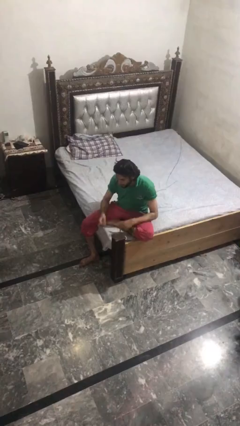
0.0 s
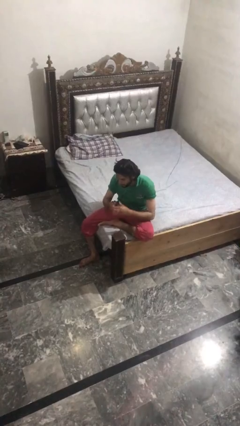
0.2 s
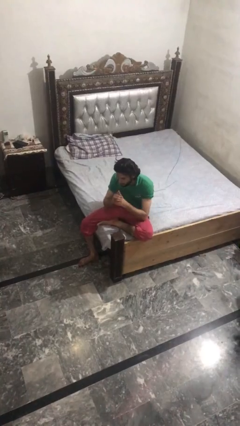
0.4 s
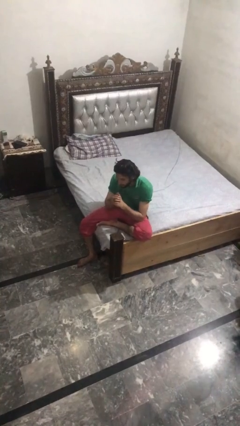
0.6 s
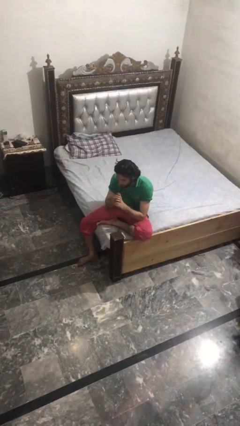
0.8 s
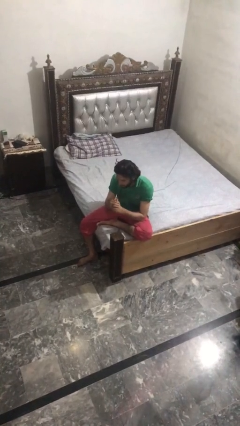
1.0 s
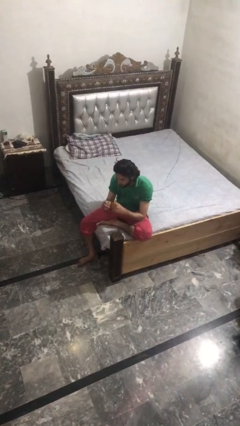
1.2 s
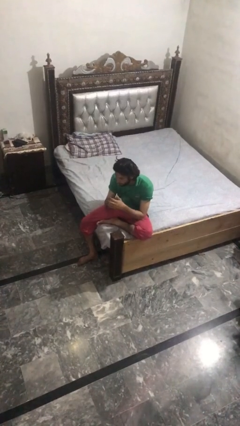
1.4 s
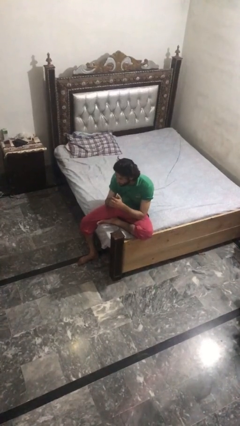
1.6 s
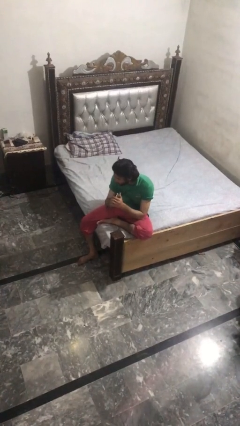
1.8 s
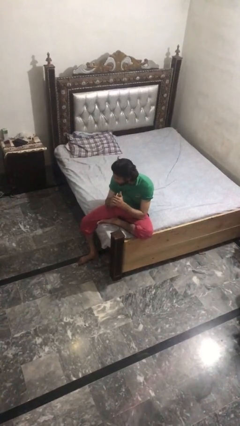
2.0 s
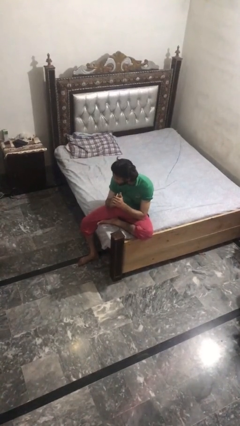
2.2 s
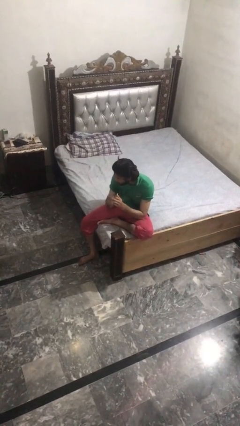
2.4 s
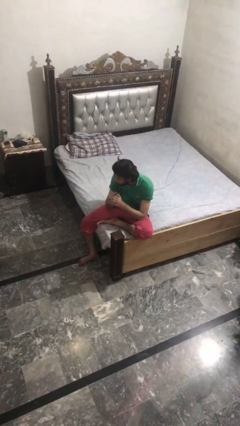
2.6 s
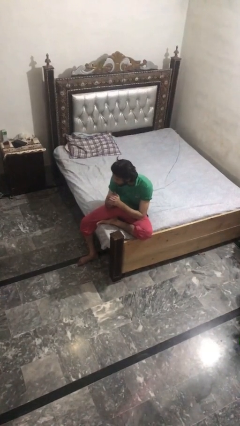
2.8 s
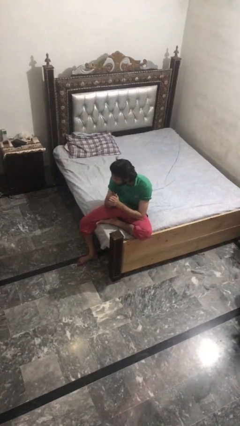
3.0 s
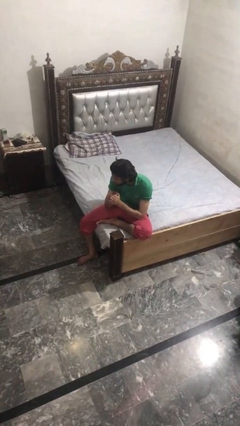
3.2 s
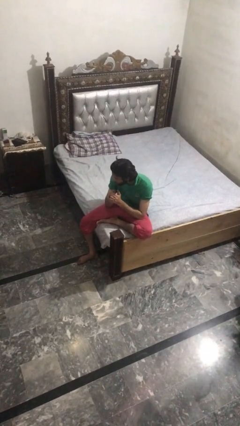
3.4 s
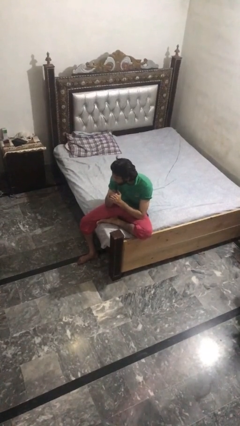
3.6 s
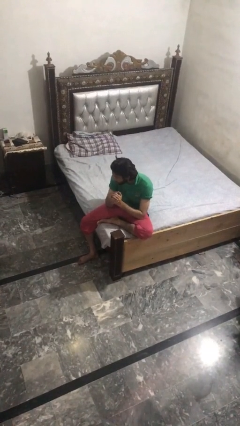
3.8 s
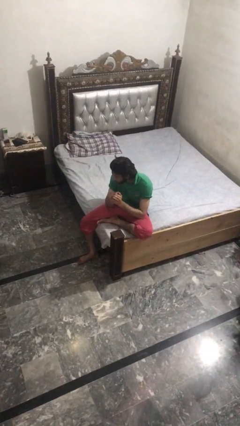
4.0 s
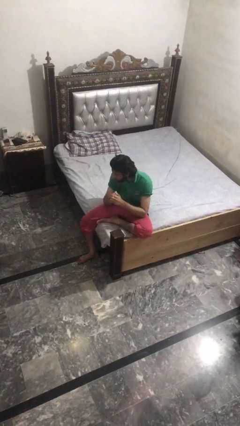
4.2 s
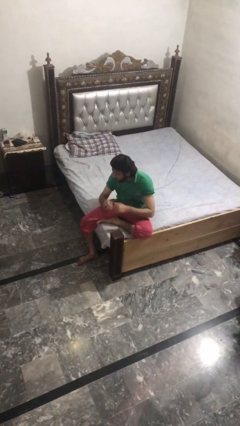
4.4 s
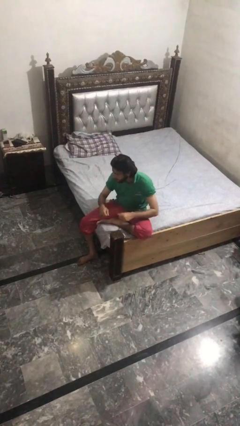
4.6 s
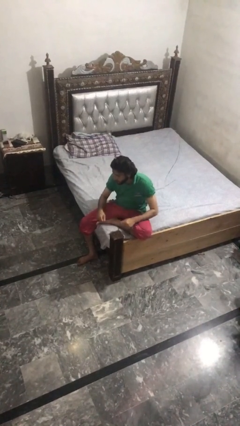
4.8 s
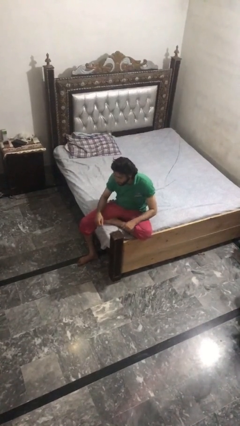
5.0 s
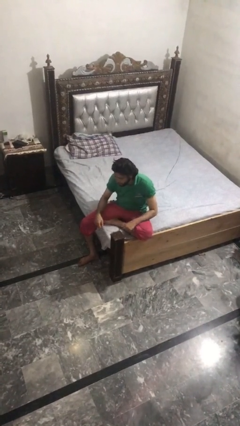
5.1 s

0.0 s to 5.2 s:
person cracks knuckles

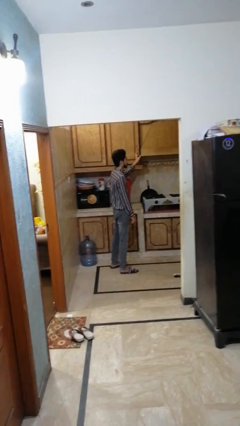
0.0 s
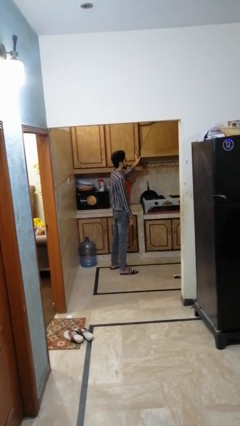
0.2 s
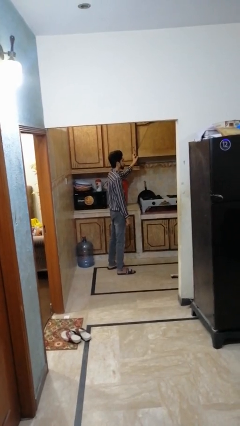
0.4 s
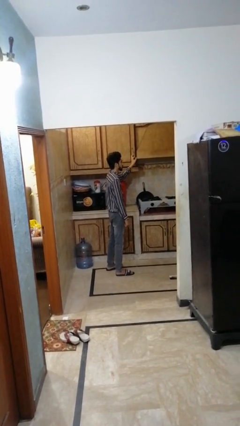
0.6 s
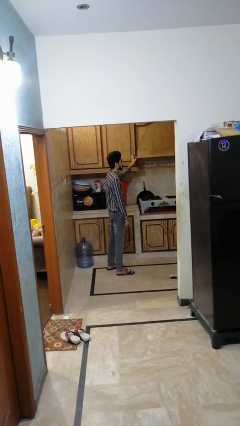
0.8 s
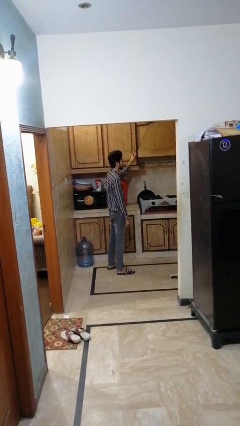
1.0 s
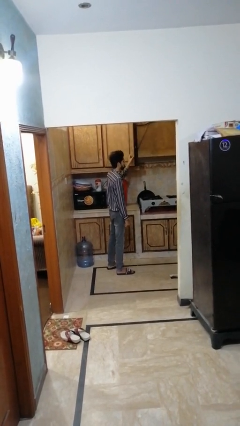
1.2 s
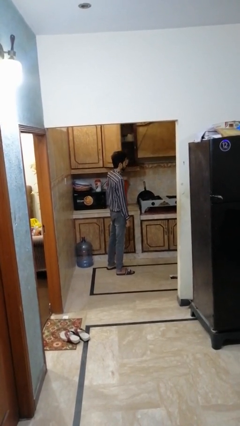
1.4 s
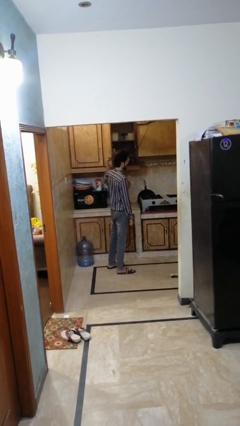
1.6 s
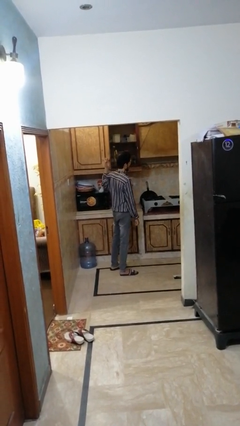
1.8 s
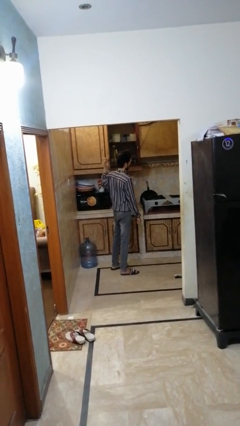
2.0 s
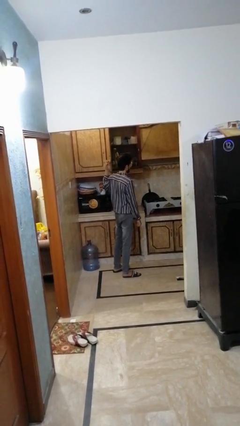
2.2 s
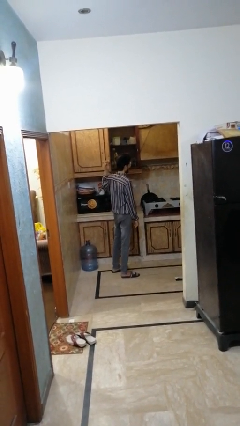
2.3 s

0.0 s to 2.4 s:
person opens cabinet

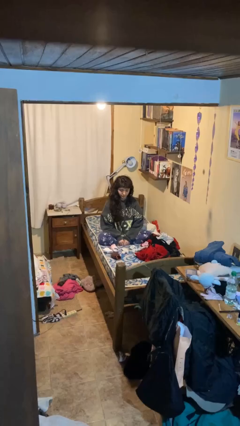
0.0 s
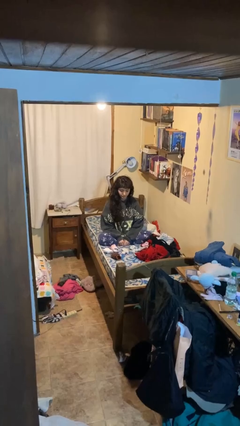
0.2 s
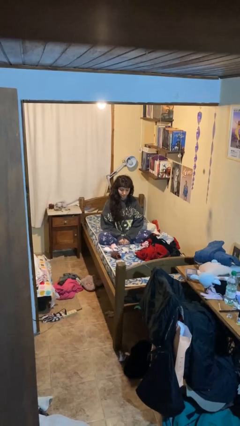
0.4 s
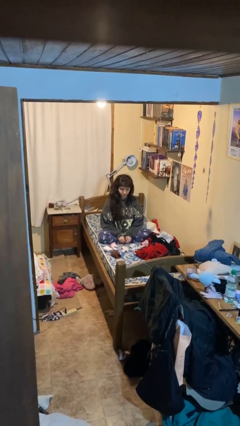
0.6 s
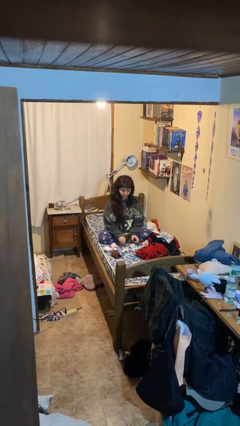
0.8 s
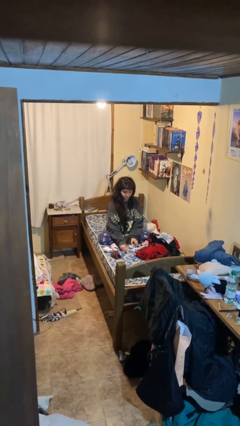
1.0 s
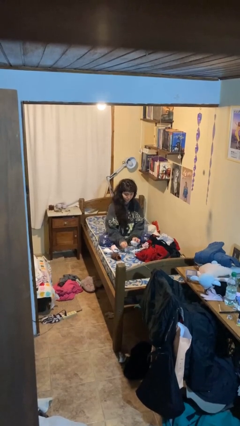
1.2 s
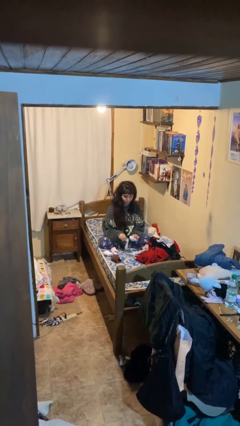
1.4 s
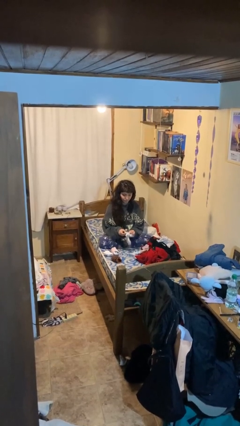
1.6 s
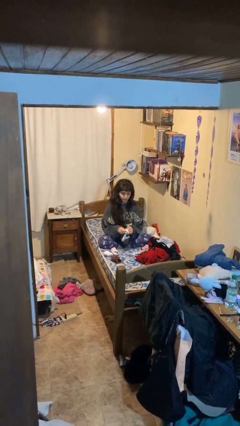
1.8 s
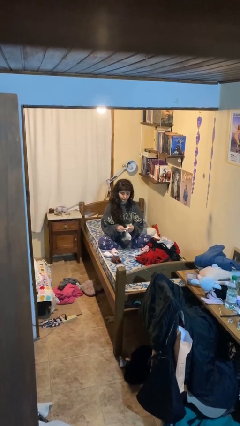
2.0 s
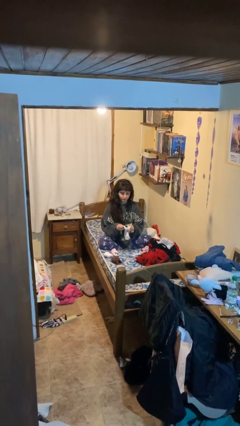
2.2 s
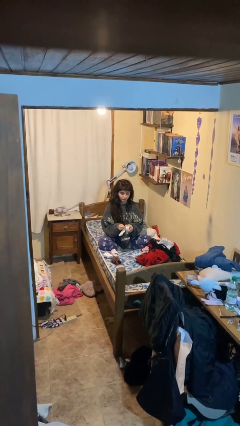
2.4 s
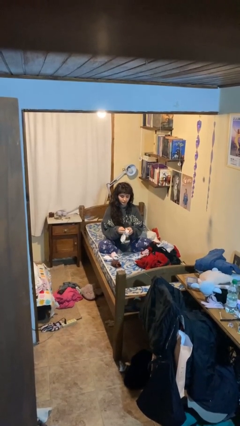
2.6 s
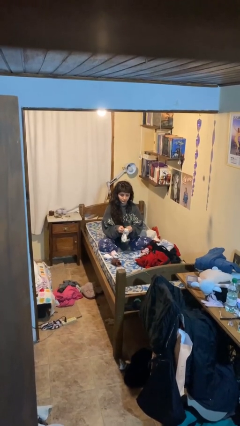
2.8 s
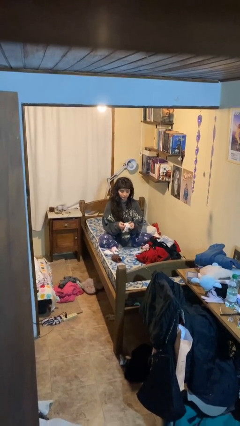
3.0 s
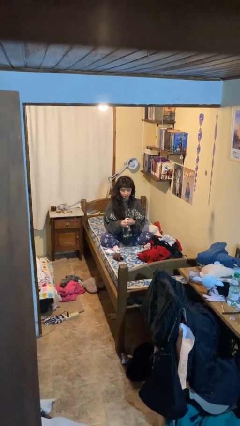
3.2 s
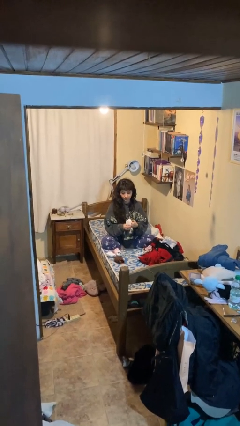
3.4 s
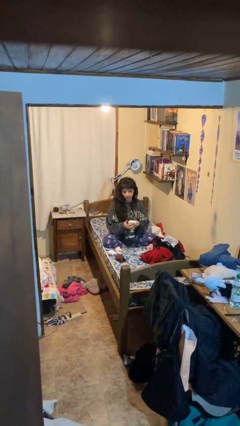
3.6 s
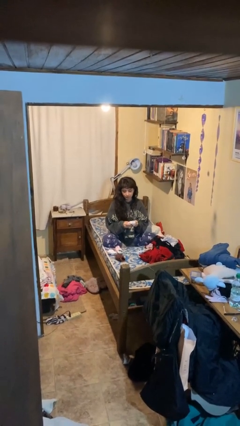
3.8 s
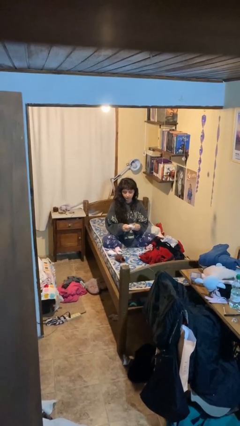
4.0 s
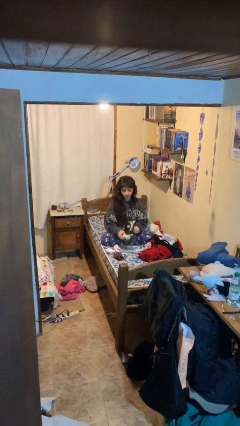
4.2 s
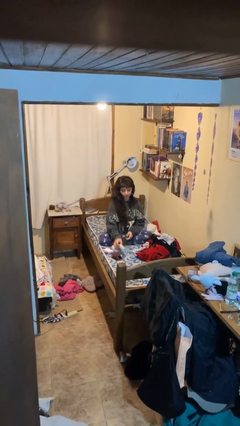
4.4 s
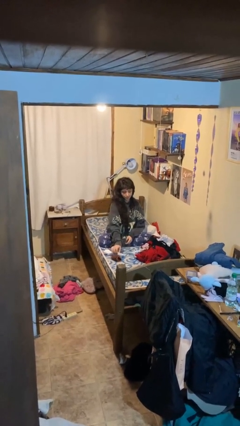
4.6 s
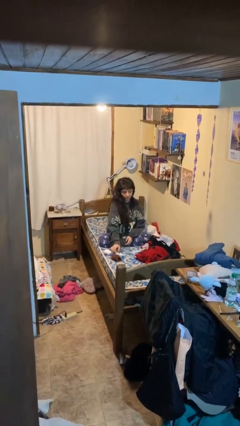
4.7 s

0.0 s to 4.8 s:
person folds socks

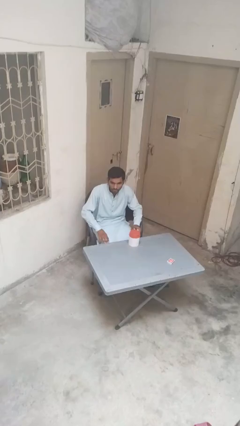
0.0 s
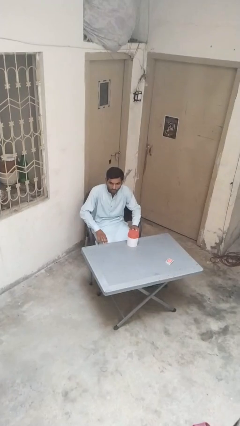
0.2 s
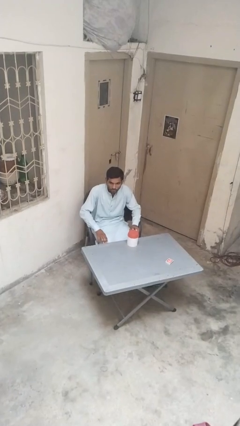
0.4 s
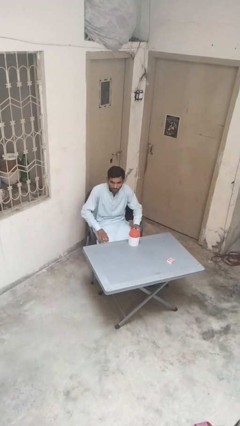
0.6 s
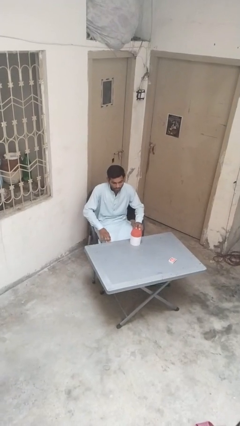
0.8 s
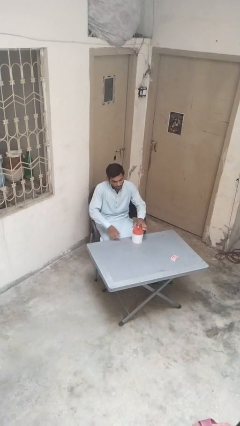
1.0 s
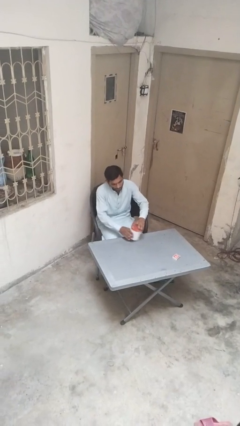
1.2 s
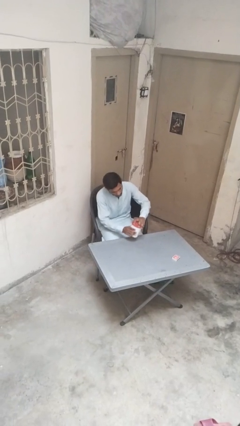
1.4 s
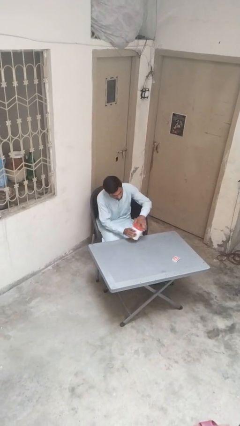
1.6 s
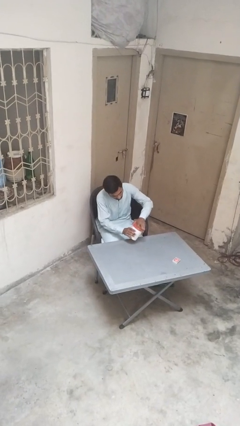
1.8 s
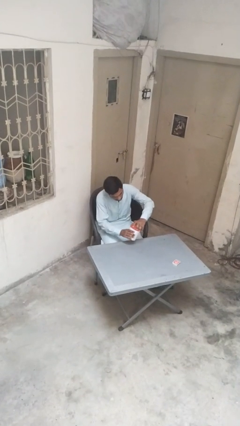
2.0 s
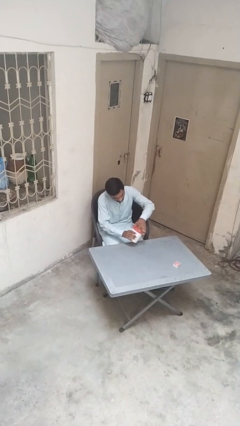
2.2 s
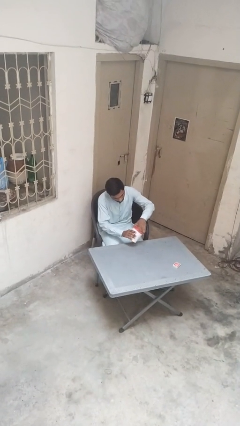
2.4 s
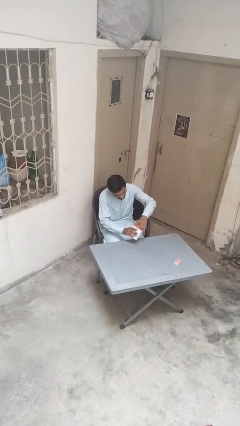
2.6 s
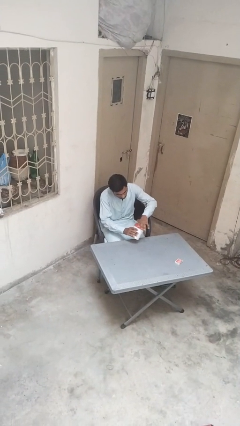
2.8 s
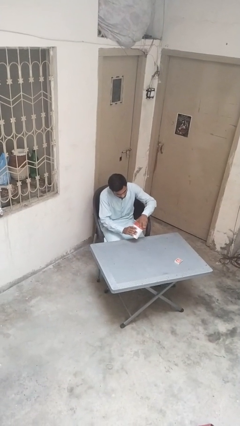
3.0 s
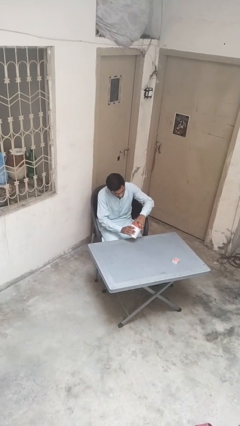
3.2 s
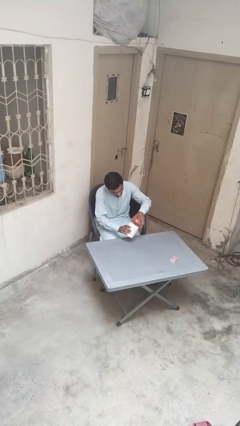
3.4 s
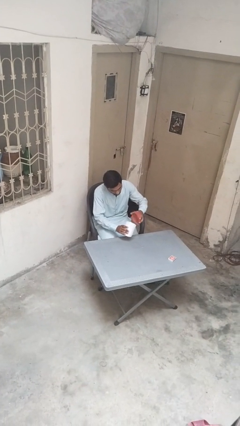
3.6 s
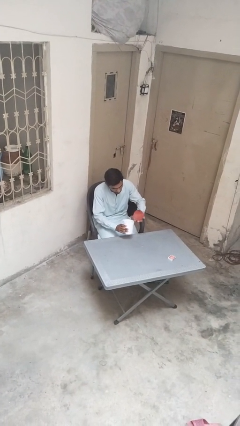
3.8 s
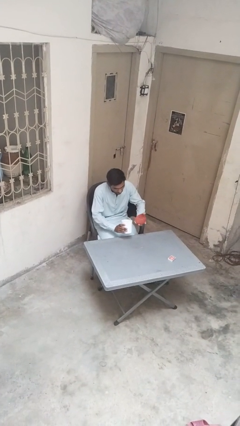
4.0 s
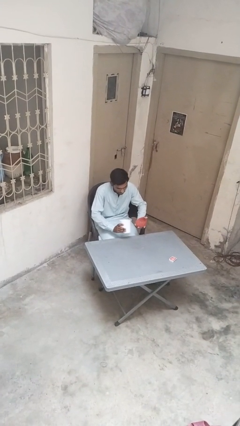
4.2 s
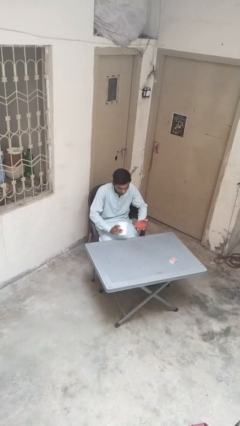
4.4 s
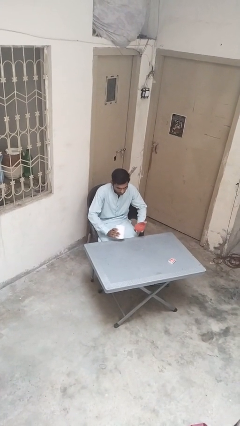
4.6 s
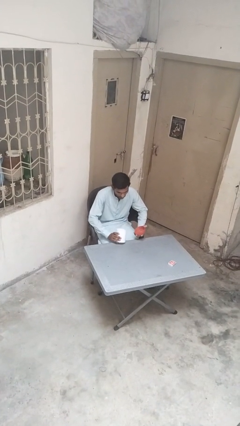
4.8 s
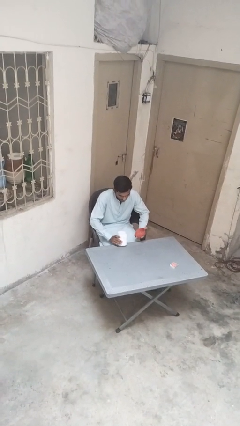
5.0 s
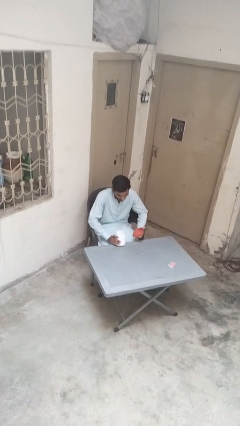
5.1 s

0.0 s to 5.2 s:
person opens jar
